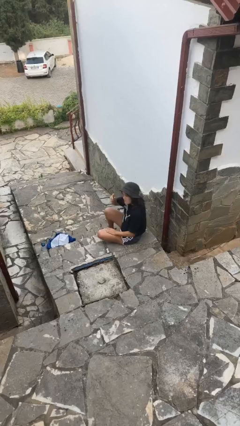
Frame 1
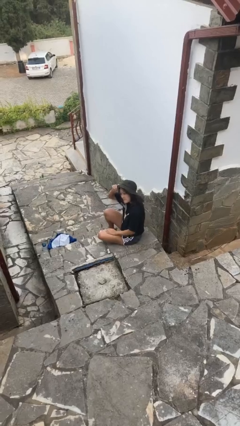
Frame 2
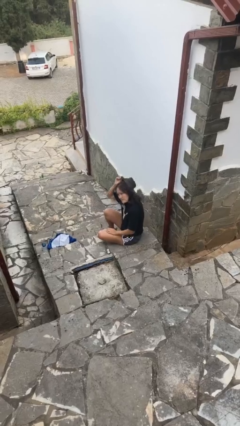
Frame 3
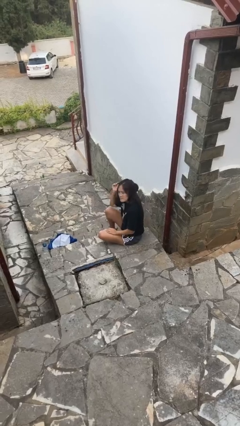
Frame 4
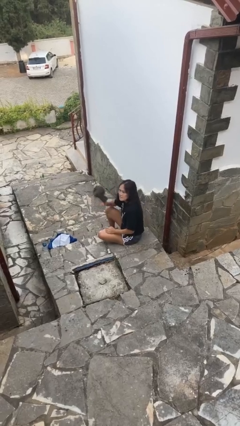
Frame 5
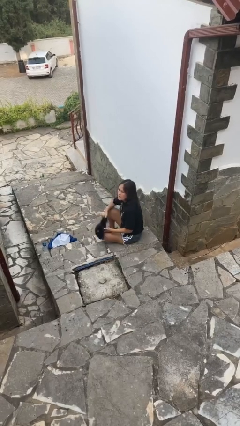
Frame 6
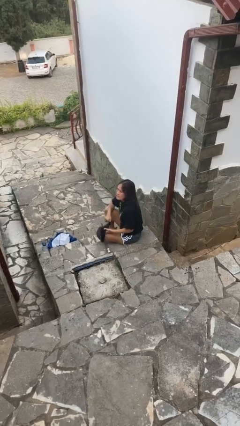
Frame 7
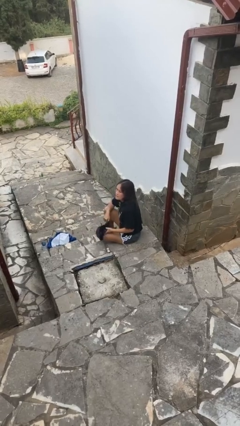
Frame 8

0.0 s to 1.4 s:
person takes off hat

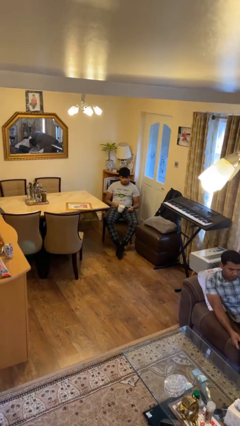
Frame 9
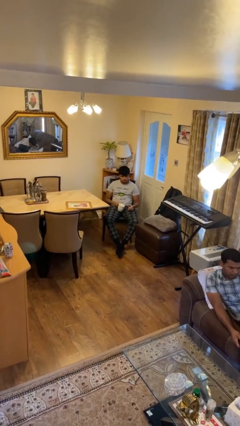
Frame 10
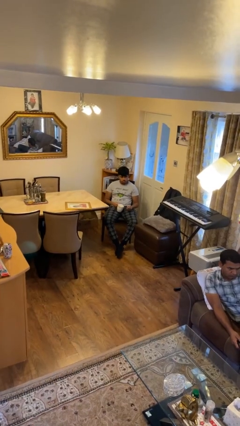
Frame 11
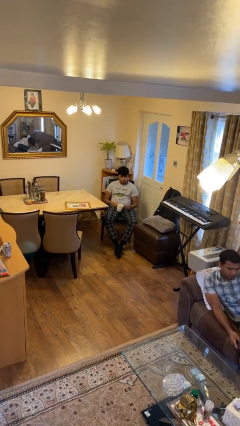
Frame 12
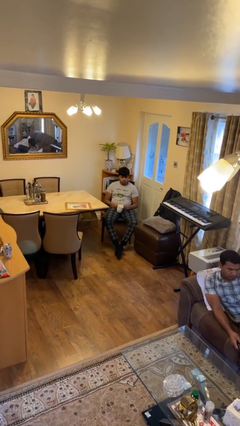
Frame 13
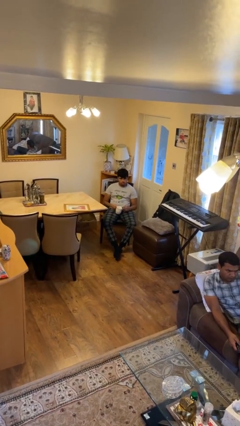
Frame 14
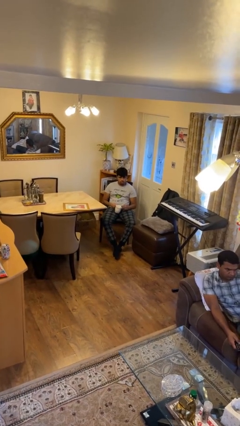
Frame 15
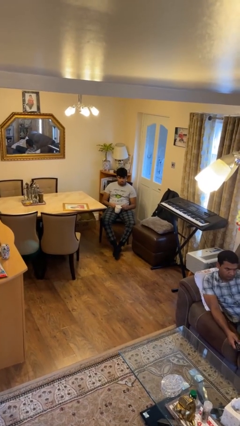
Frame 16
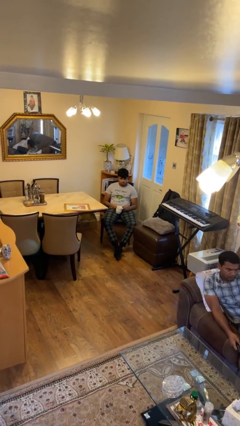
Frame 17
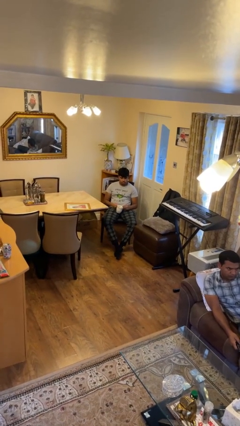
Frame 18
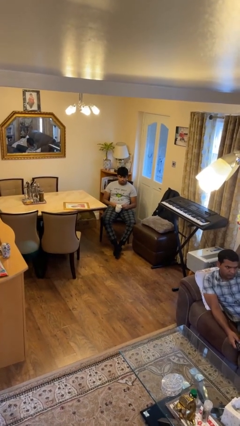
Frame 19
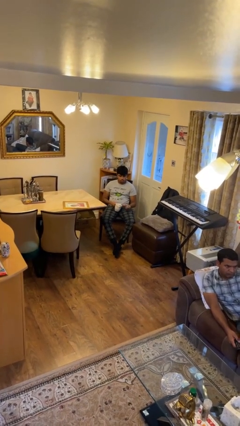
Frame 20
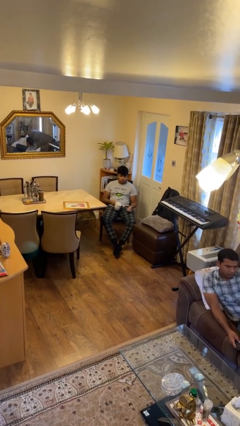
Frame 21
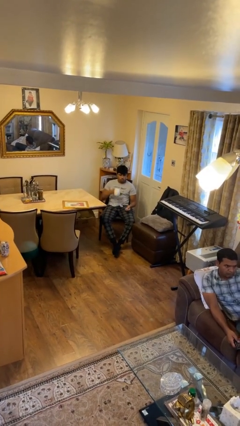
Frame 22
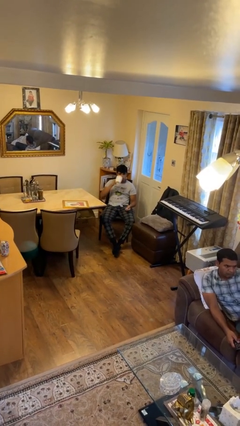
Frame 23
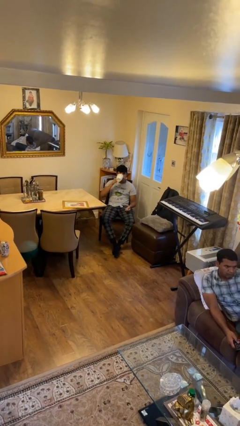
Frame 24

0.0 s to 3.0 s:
person stirs mug

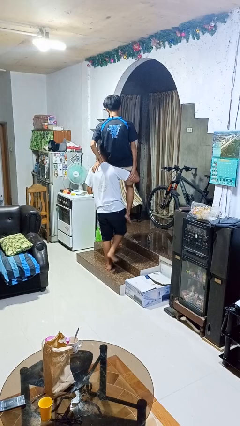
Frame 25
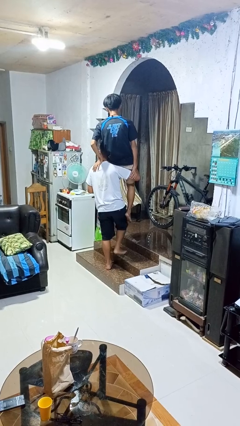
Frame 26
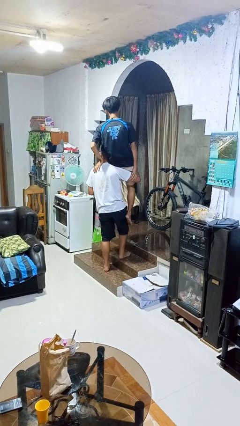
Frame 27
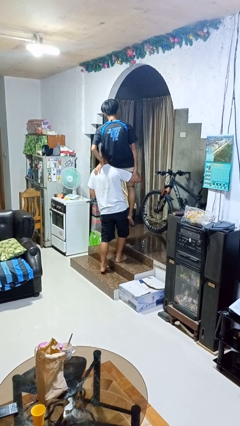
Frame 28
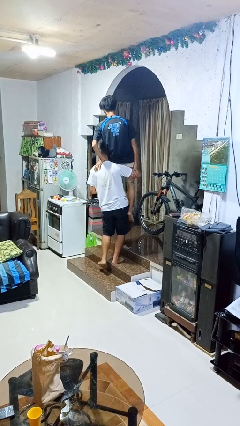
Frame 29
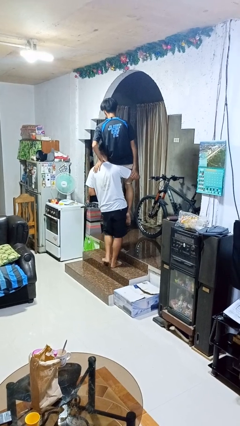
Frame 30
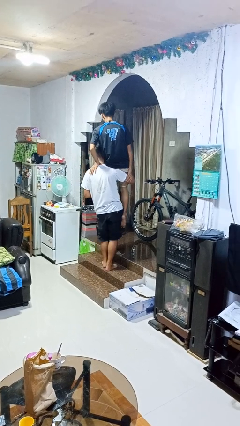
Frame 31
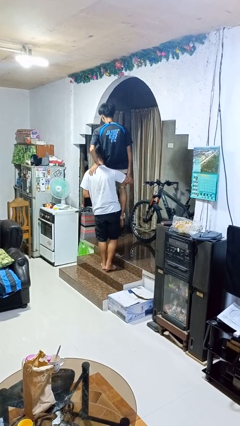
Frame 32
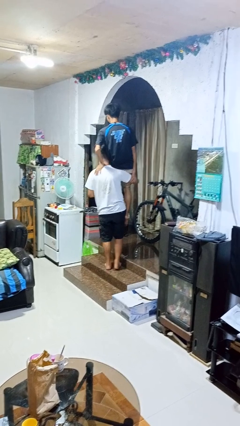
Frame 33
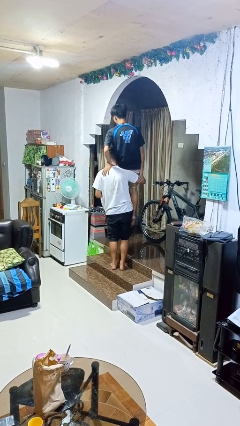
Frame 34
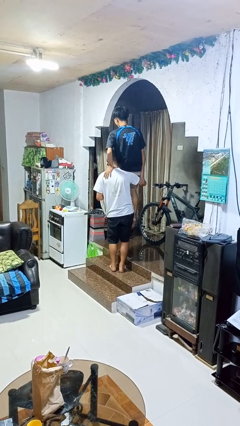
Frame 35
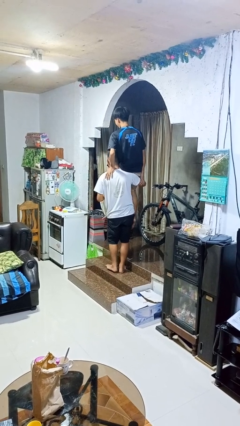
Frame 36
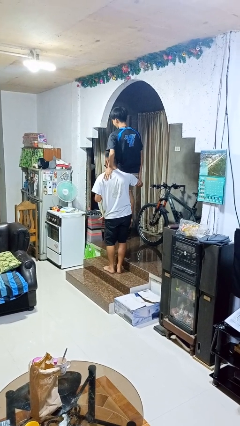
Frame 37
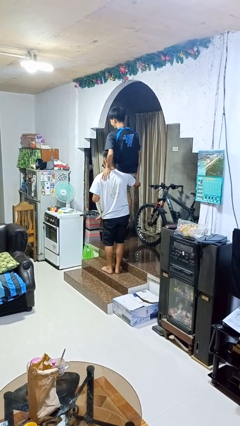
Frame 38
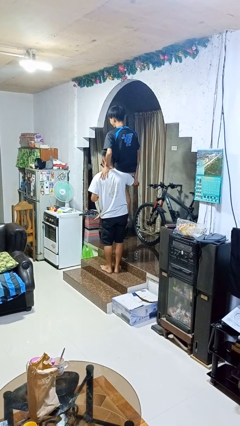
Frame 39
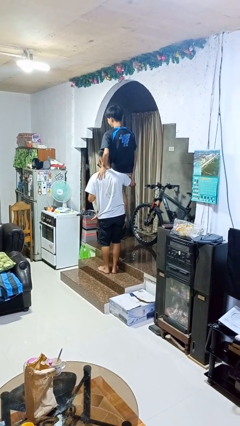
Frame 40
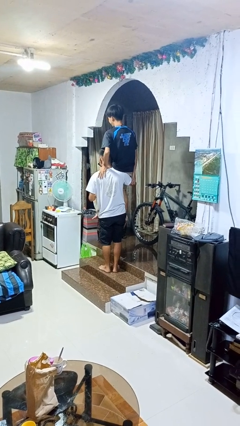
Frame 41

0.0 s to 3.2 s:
person carries person on shoulders

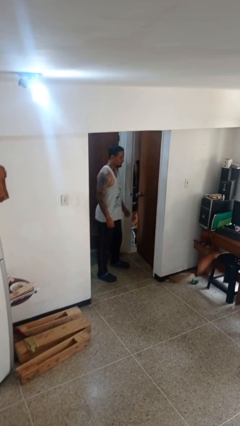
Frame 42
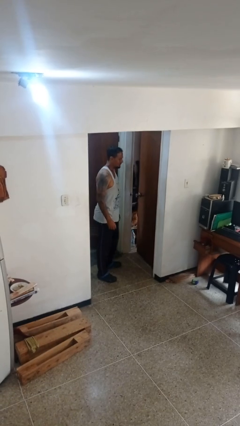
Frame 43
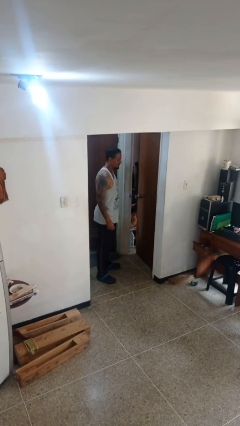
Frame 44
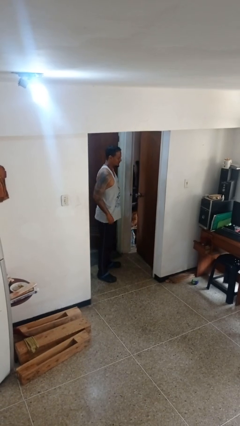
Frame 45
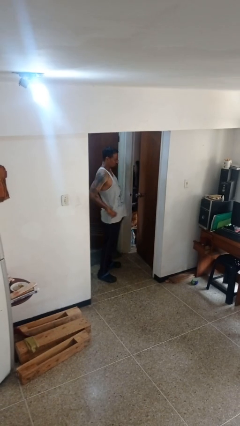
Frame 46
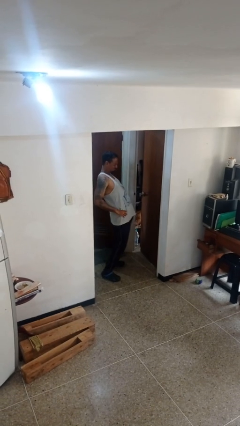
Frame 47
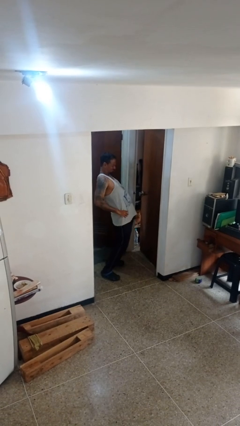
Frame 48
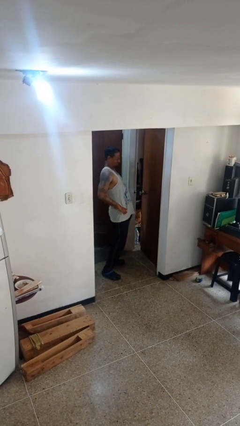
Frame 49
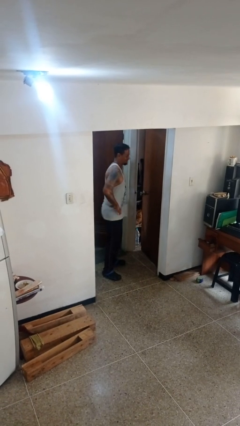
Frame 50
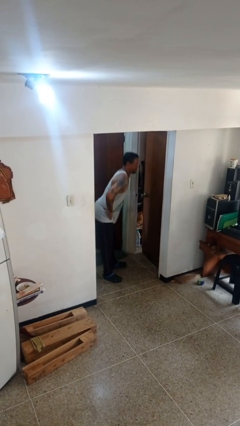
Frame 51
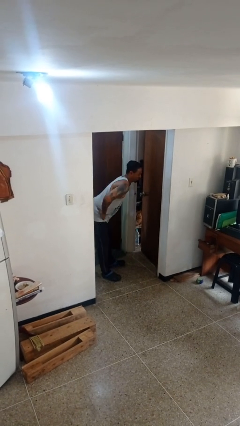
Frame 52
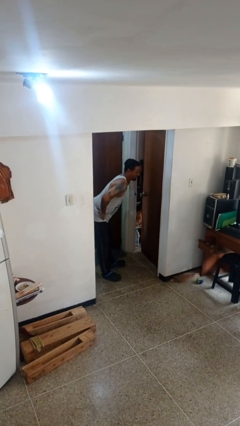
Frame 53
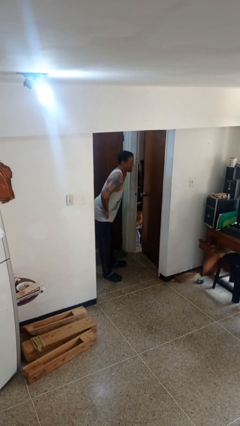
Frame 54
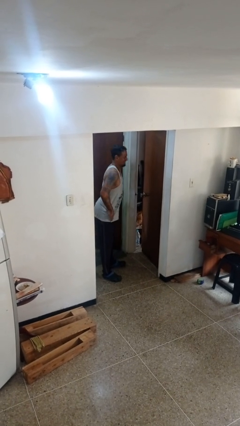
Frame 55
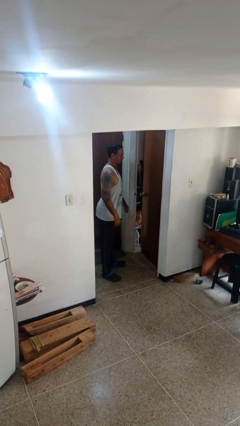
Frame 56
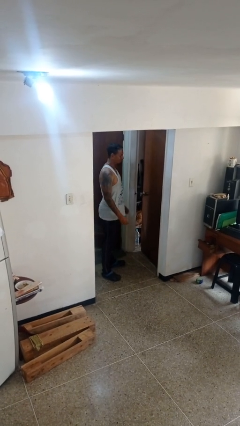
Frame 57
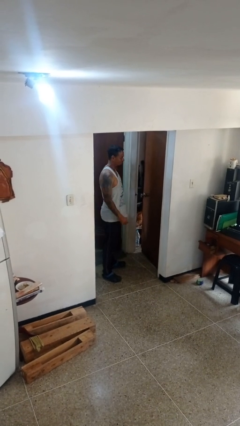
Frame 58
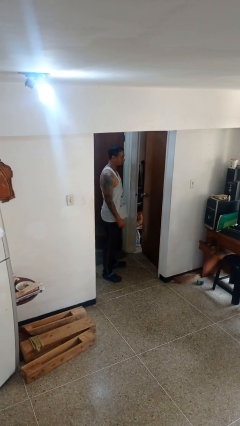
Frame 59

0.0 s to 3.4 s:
person wiggles hips

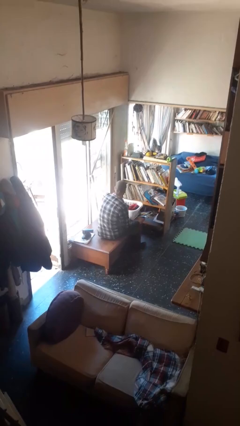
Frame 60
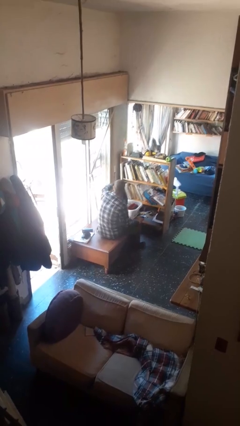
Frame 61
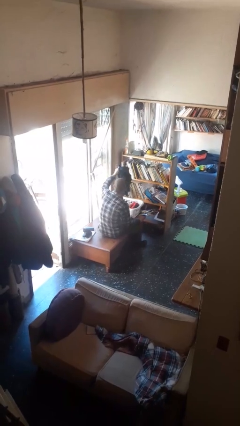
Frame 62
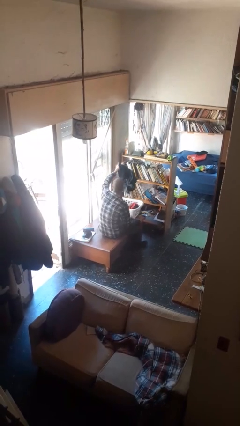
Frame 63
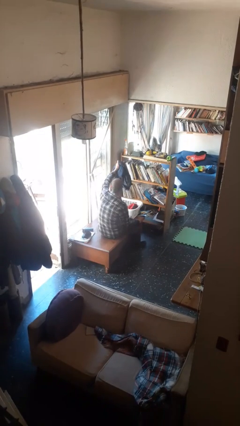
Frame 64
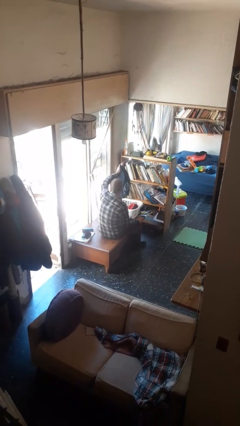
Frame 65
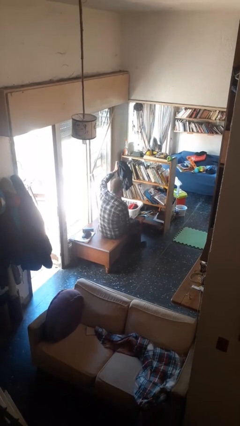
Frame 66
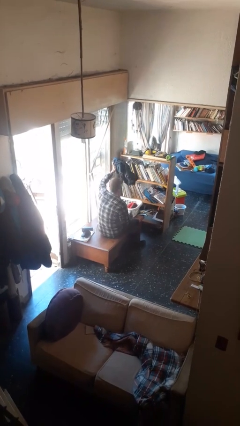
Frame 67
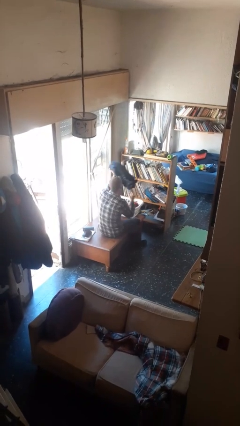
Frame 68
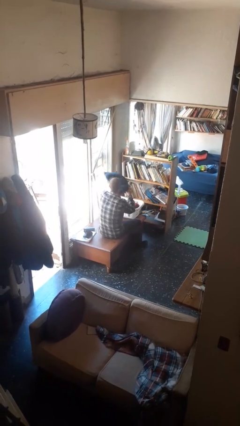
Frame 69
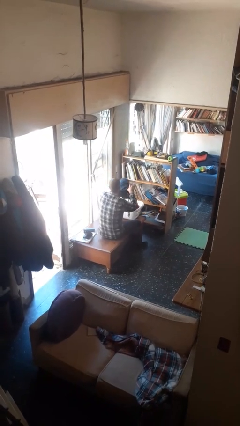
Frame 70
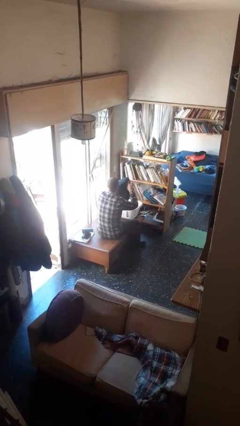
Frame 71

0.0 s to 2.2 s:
person takes object from basket

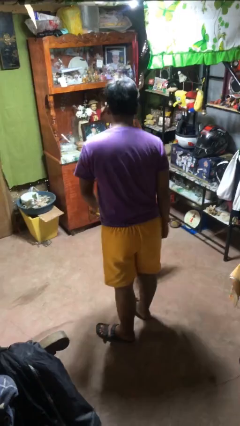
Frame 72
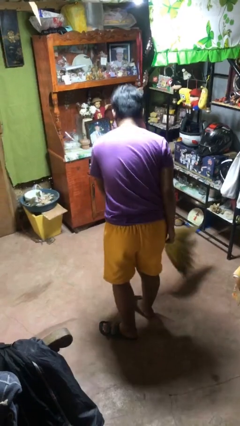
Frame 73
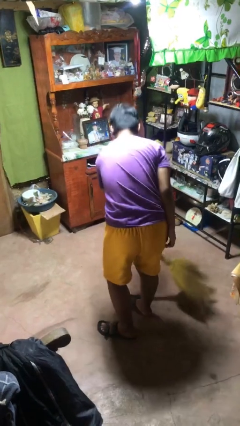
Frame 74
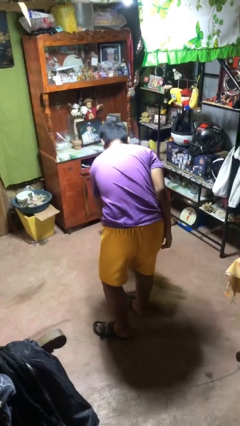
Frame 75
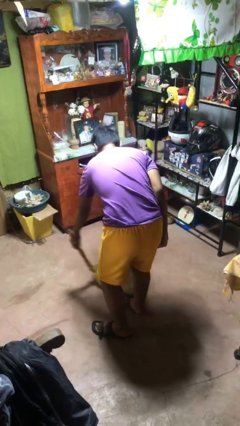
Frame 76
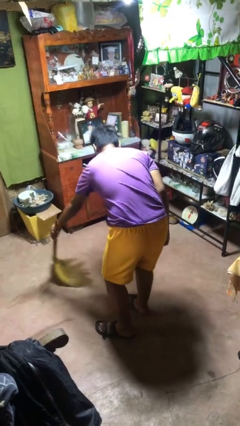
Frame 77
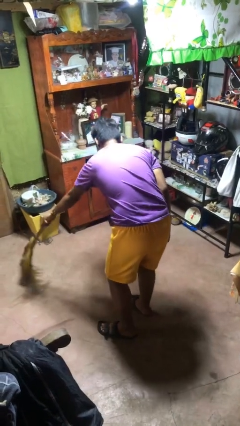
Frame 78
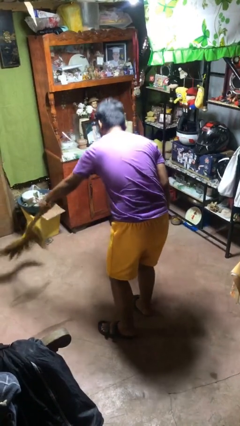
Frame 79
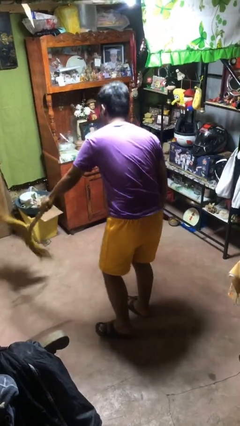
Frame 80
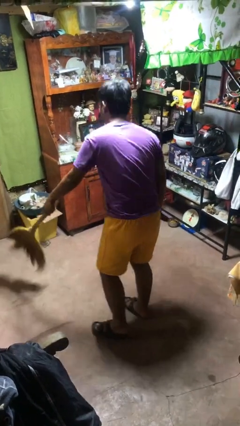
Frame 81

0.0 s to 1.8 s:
person sweeps floor

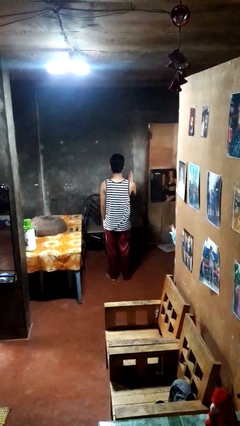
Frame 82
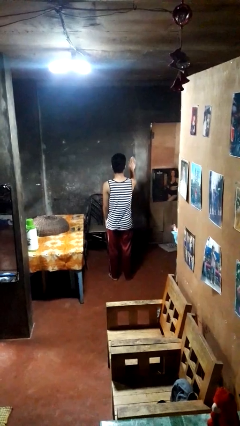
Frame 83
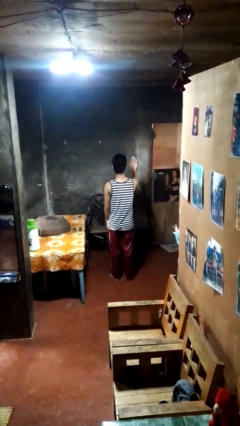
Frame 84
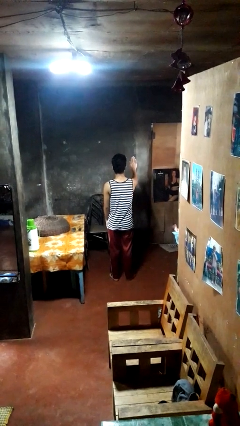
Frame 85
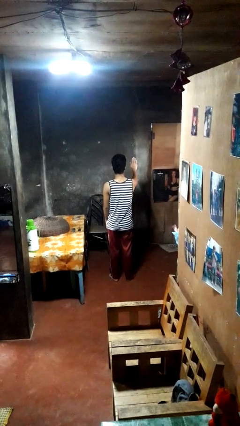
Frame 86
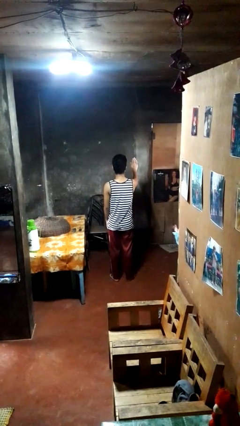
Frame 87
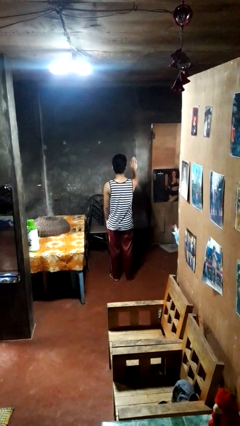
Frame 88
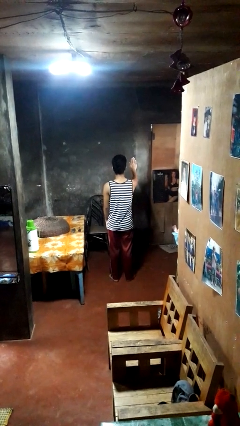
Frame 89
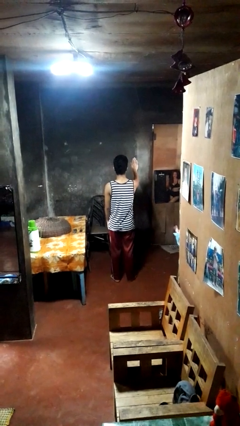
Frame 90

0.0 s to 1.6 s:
person gestures stop

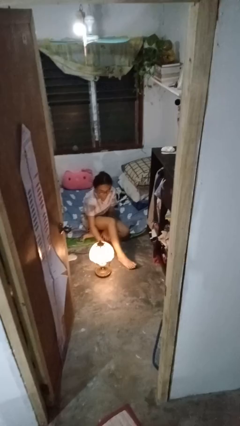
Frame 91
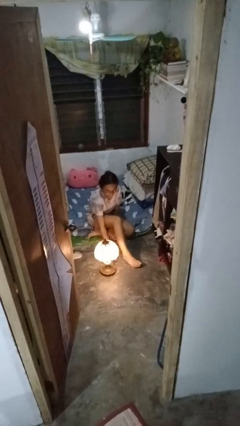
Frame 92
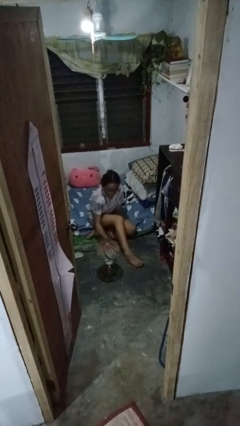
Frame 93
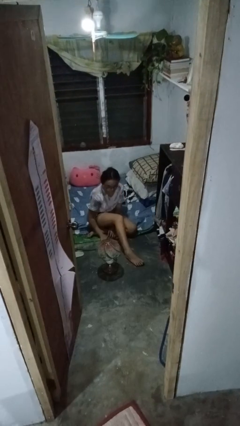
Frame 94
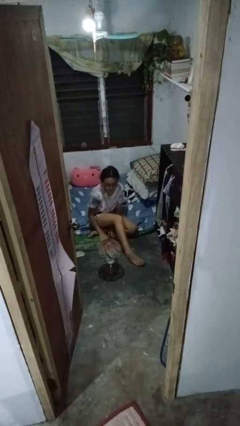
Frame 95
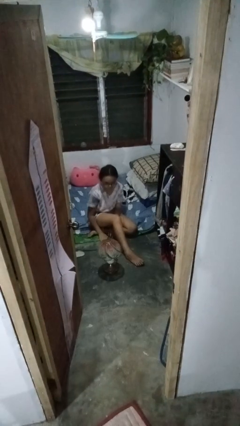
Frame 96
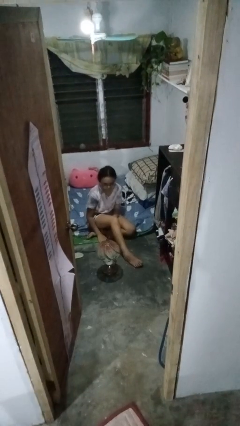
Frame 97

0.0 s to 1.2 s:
person turns off lamp
